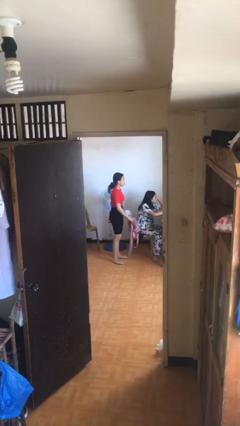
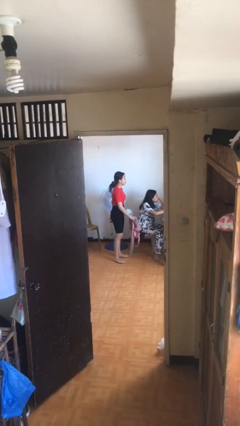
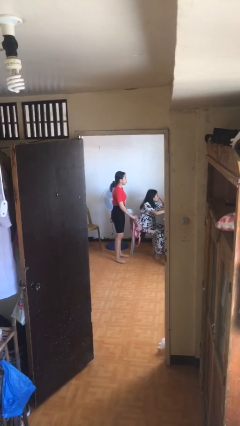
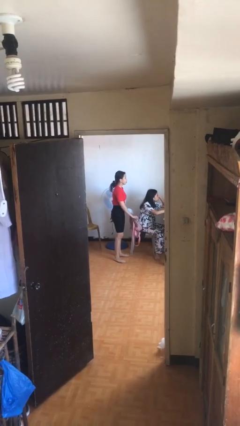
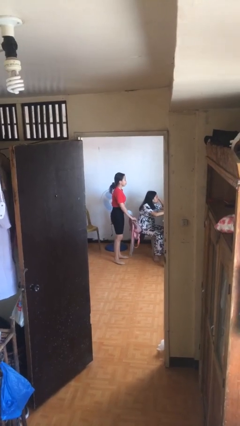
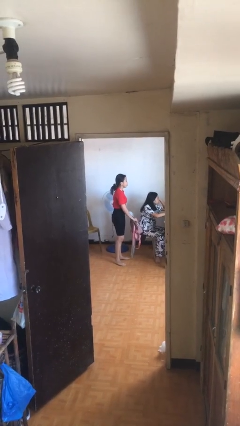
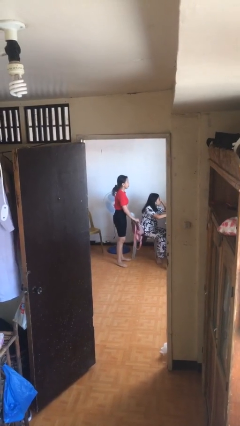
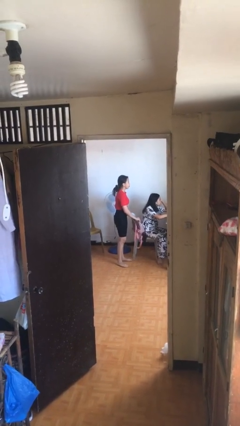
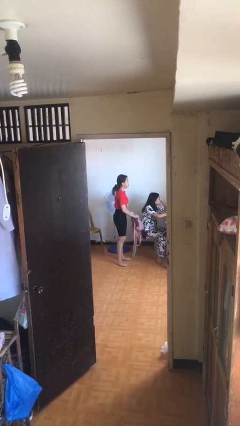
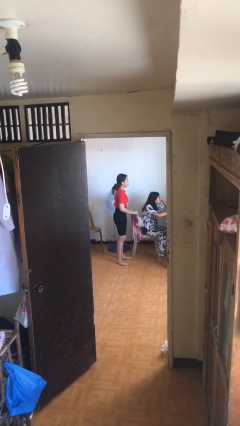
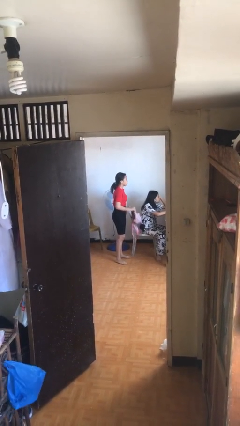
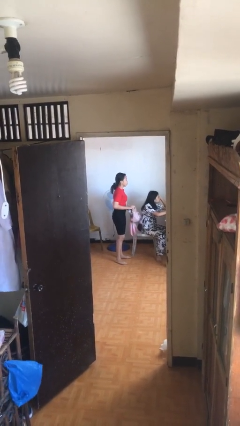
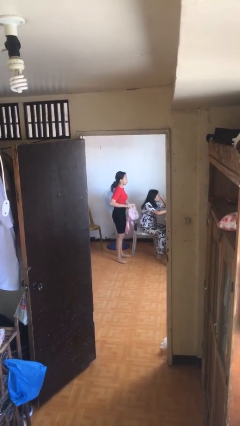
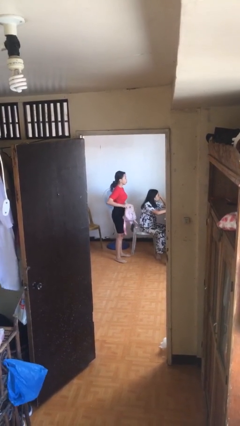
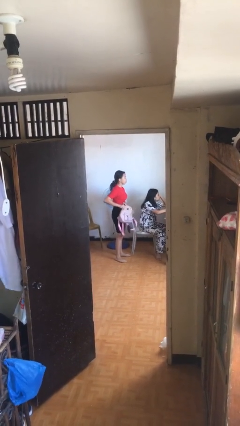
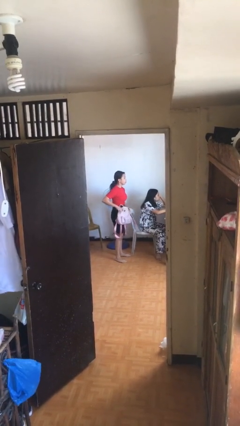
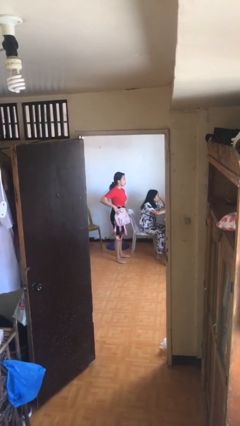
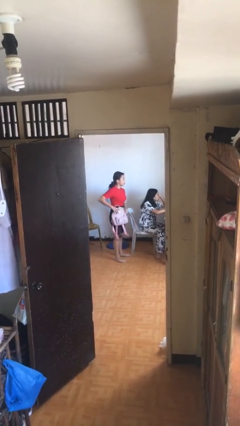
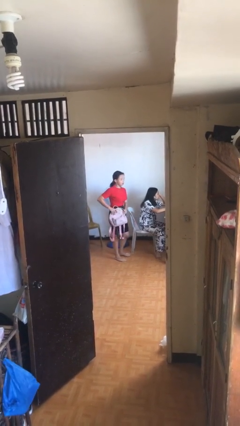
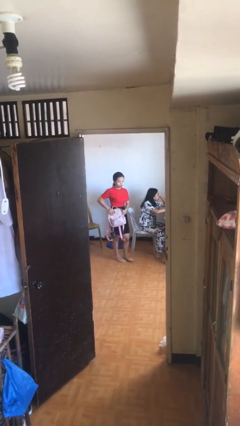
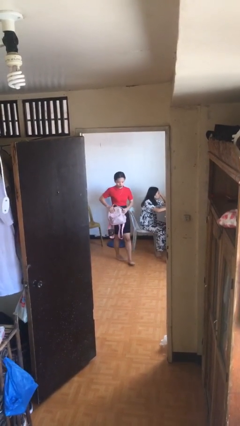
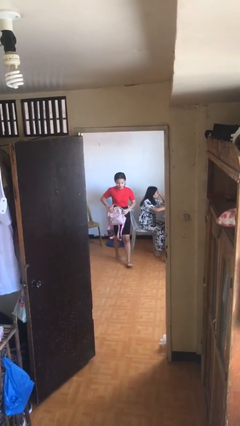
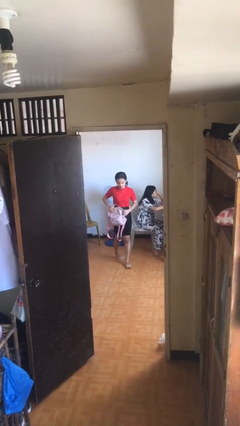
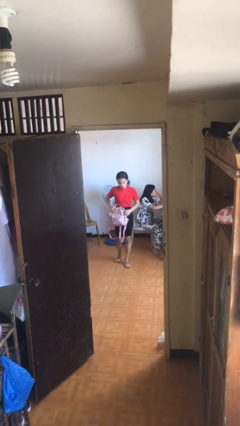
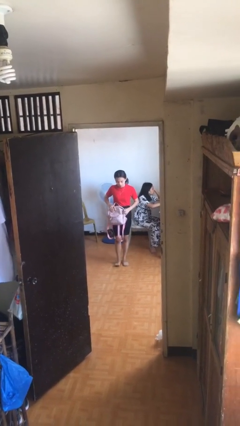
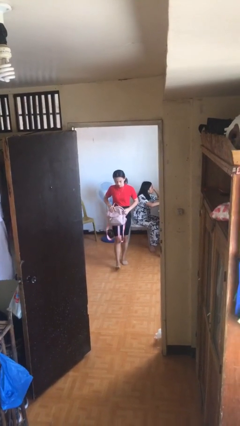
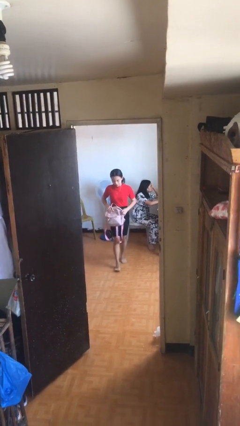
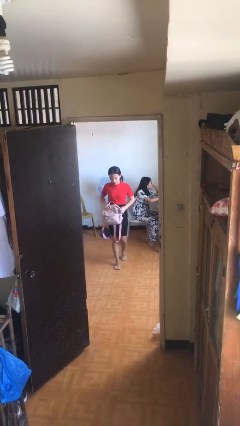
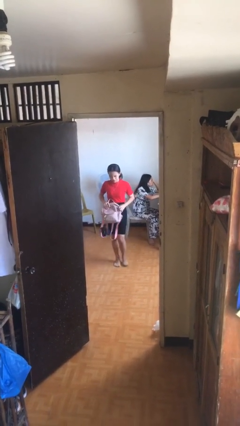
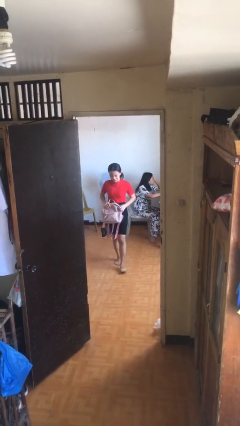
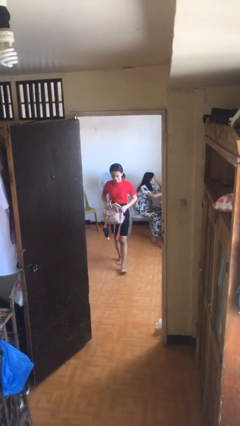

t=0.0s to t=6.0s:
person steals object from person

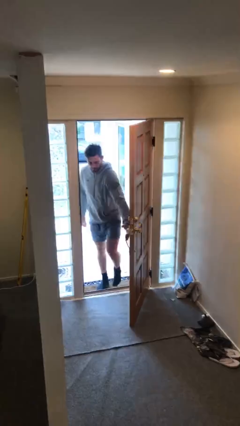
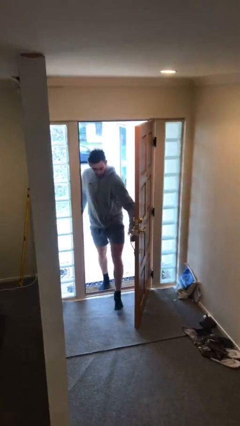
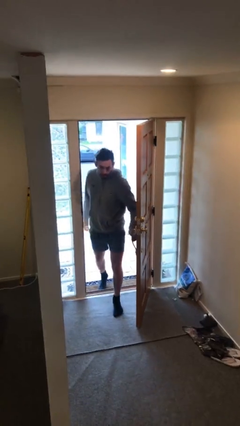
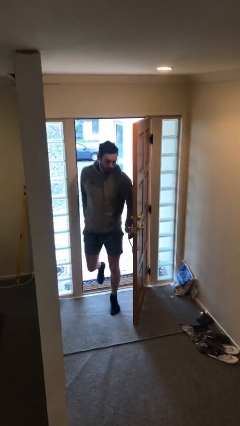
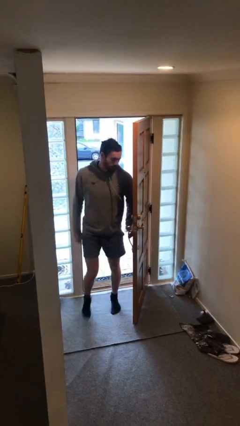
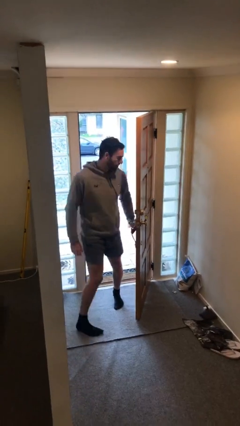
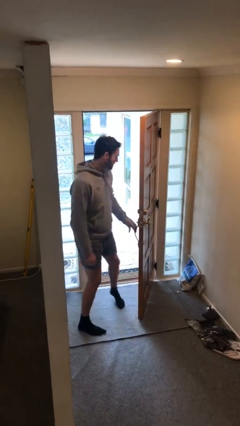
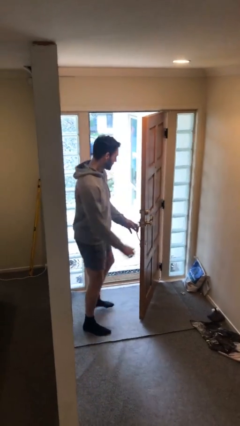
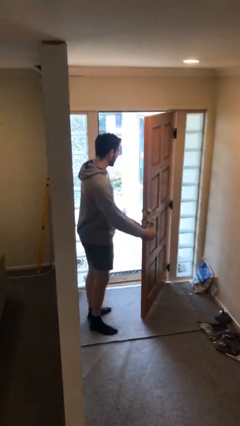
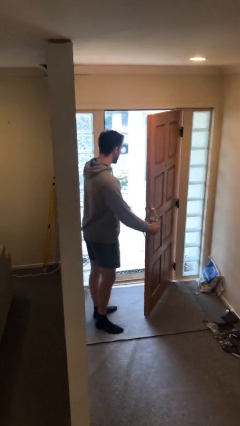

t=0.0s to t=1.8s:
person enters scene through structure

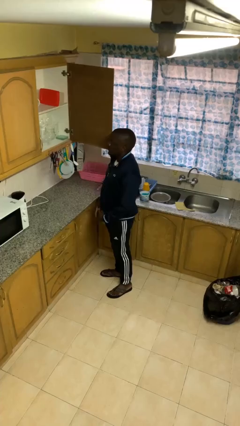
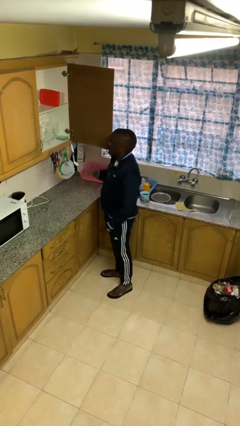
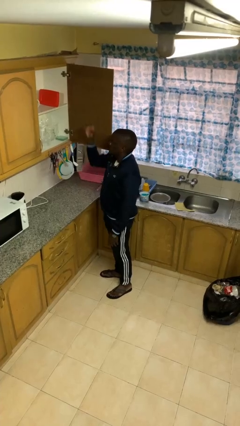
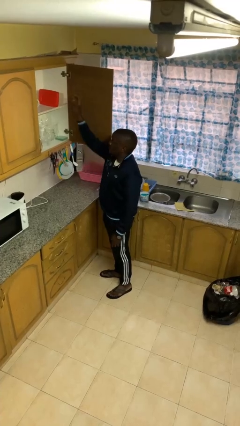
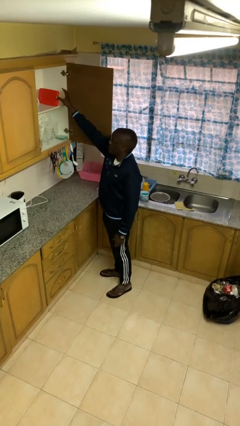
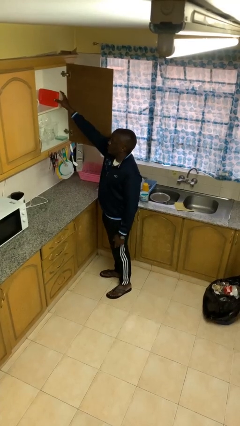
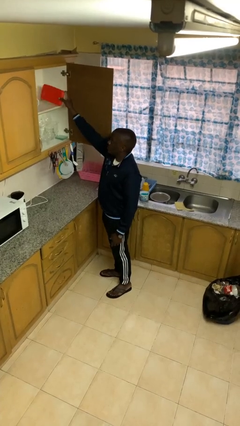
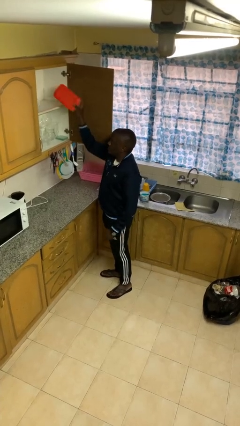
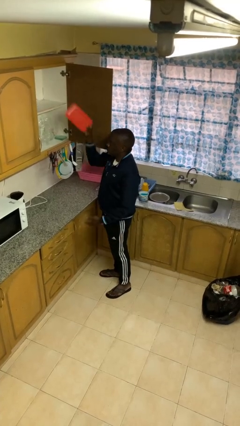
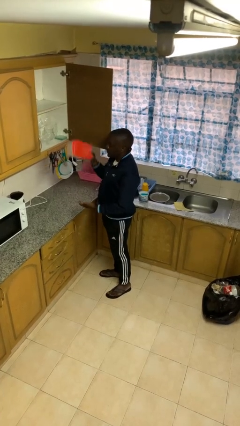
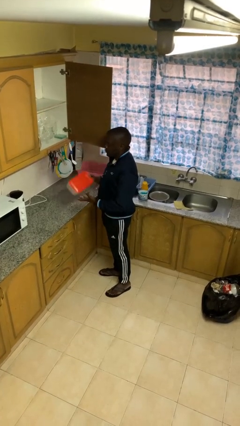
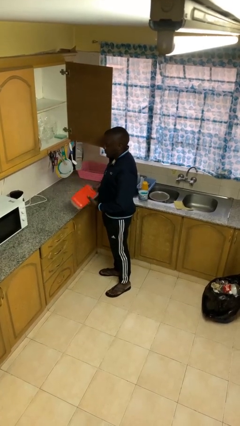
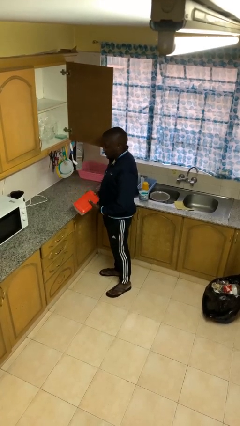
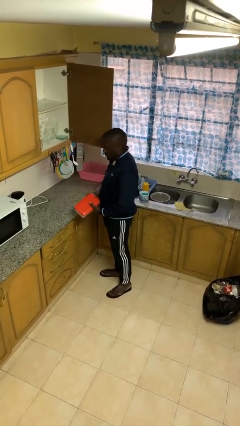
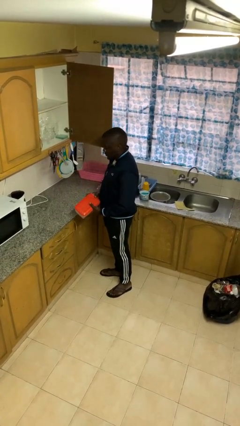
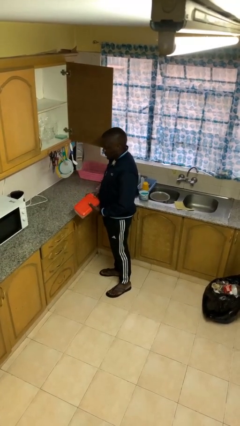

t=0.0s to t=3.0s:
person picks up object from shelf

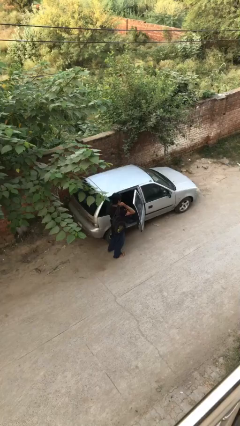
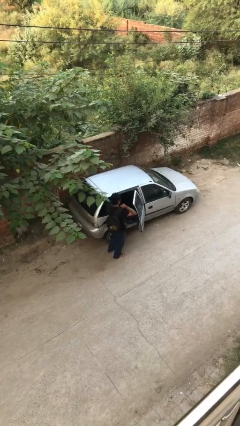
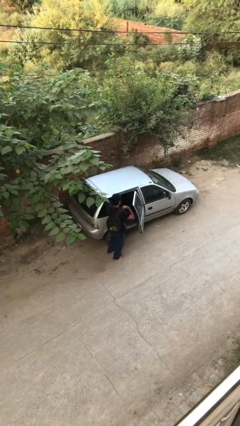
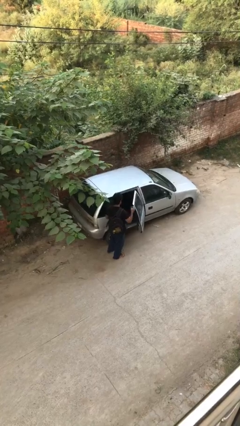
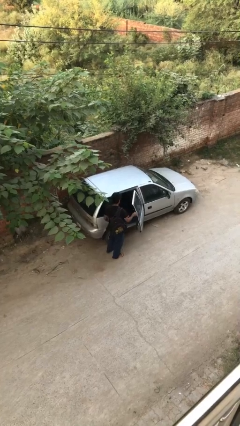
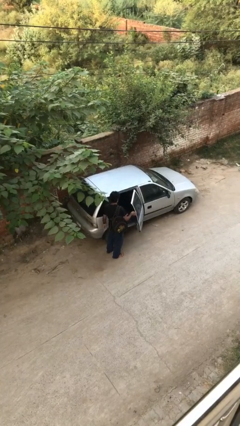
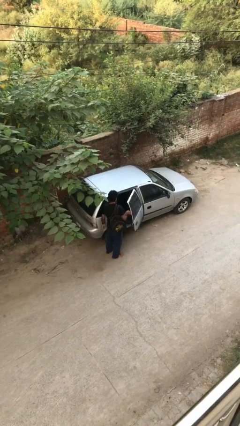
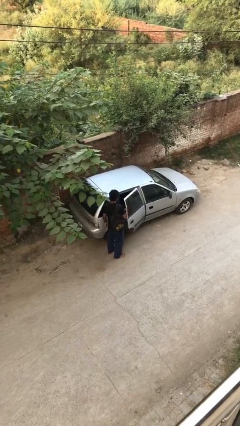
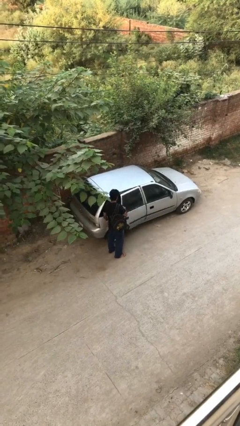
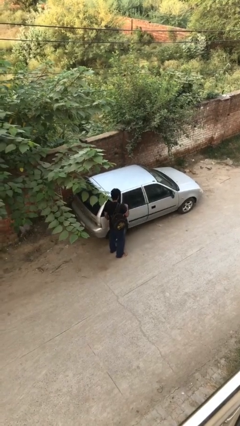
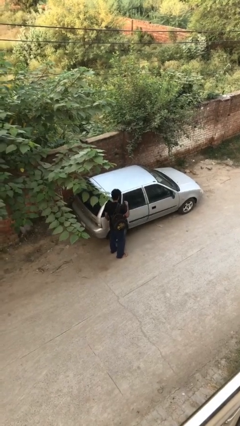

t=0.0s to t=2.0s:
person closes car door

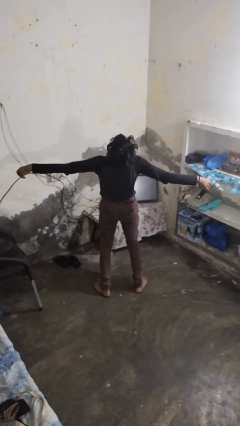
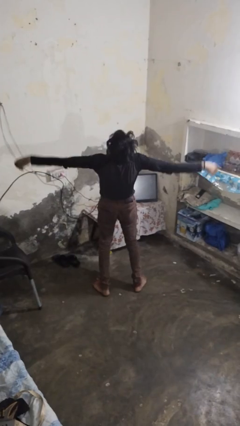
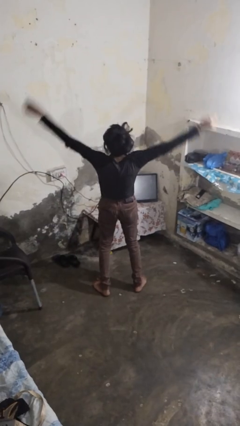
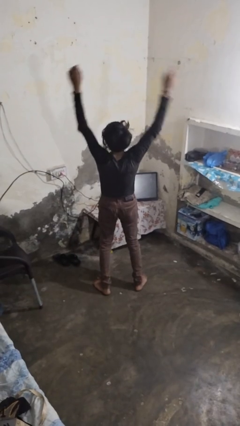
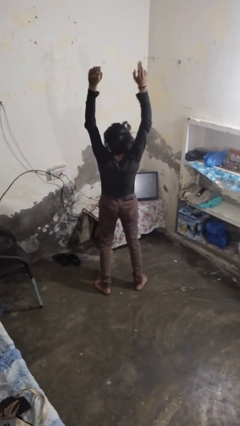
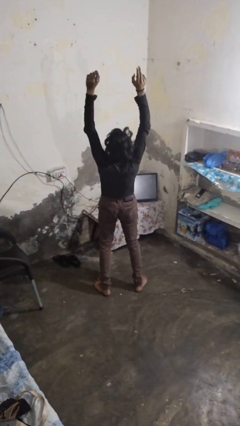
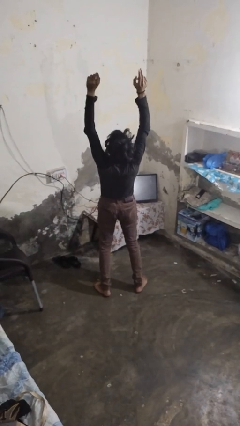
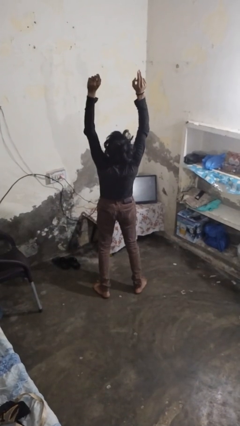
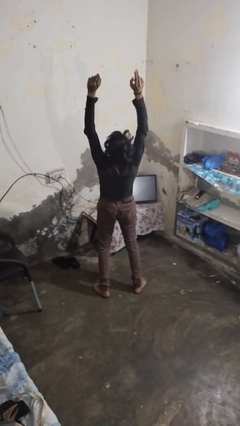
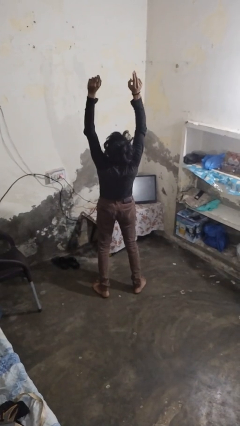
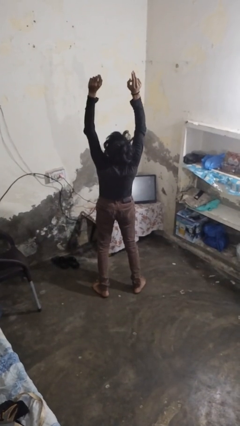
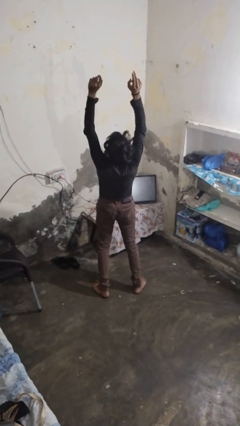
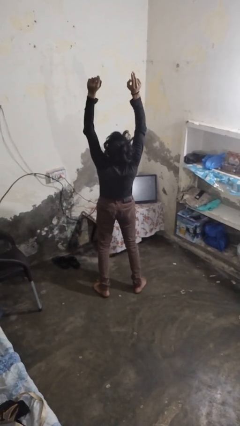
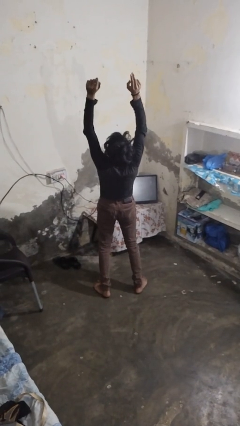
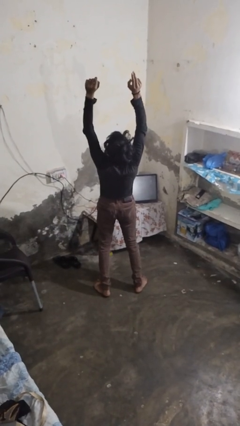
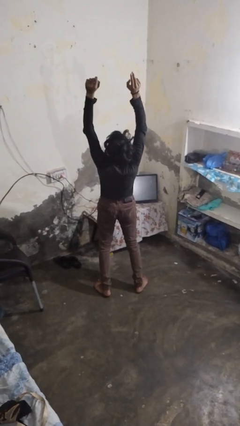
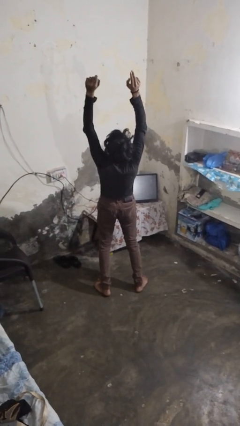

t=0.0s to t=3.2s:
person stretches arms over head

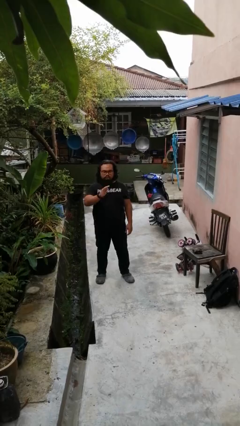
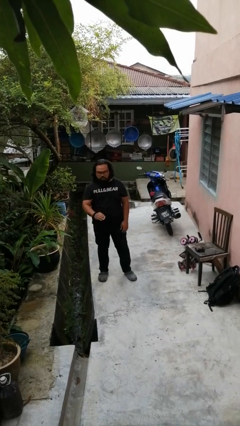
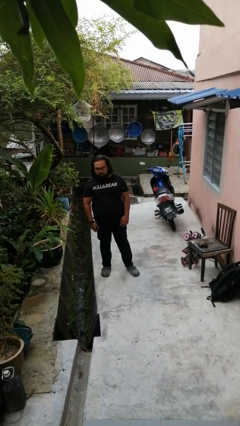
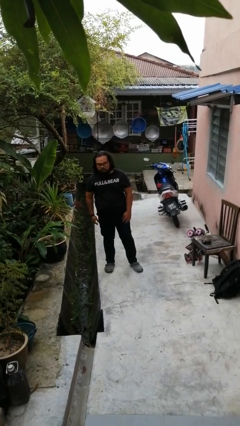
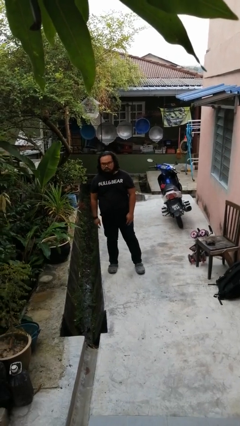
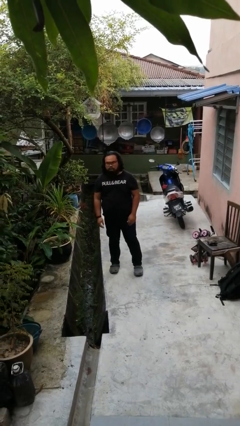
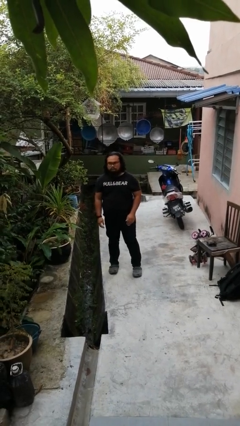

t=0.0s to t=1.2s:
person gestures lower hand
